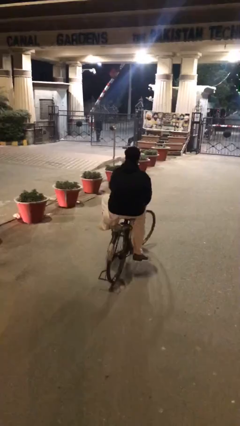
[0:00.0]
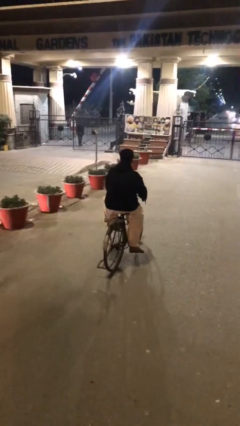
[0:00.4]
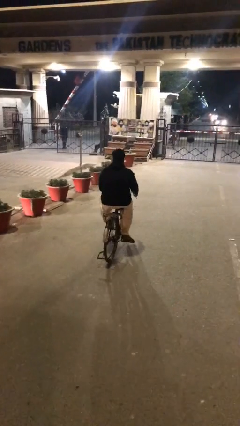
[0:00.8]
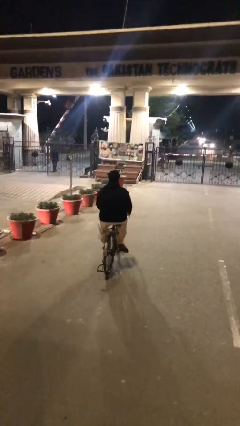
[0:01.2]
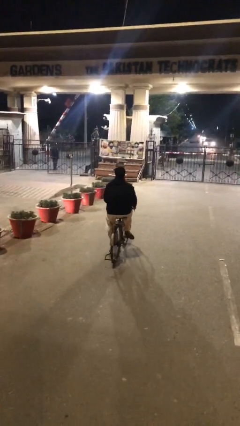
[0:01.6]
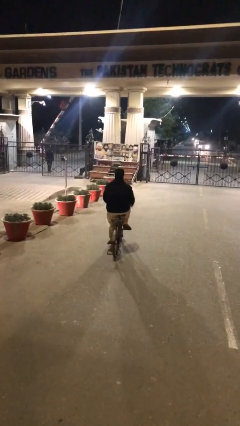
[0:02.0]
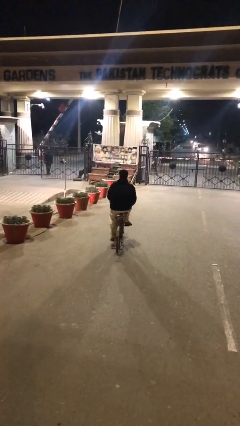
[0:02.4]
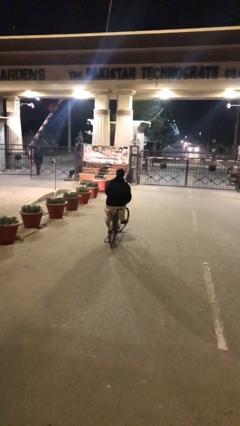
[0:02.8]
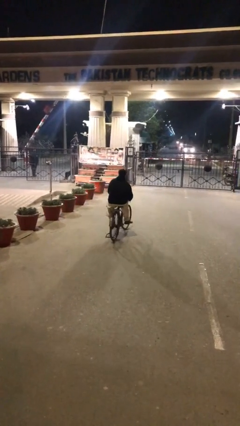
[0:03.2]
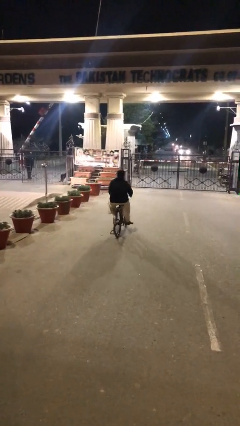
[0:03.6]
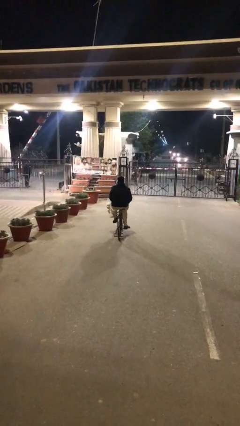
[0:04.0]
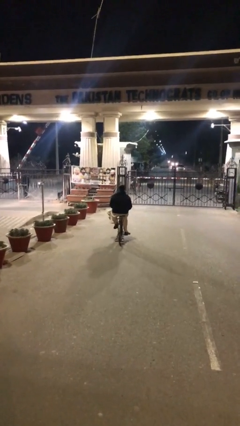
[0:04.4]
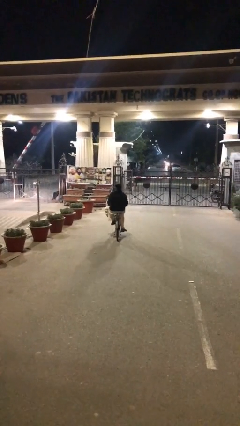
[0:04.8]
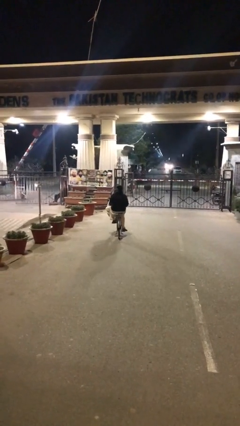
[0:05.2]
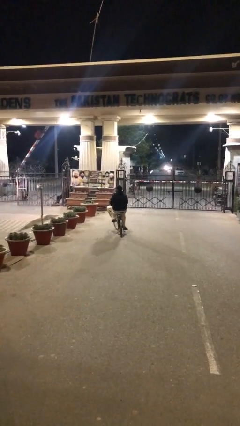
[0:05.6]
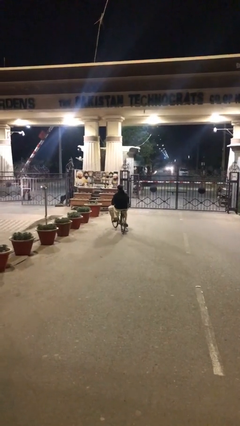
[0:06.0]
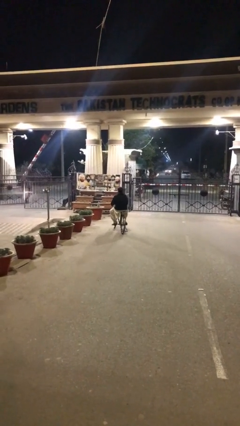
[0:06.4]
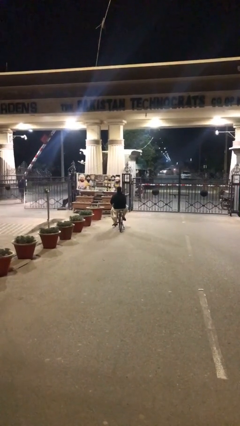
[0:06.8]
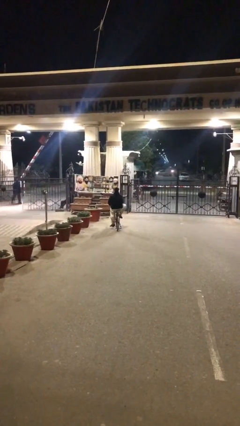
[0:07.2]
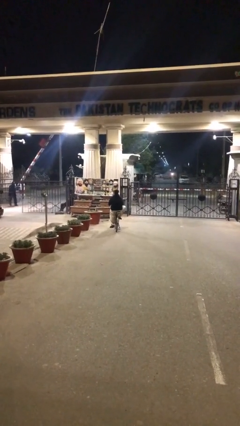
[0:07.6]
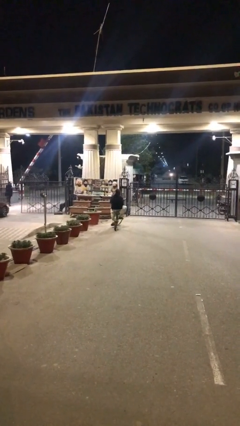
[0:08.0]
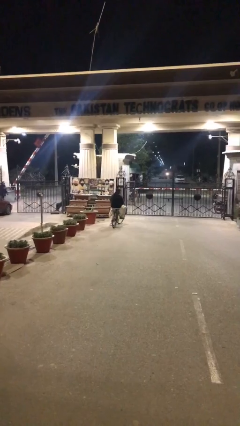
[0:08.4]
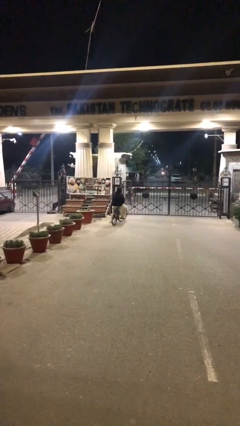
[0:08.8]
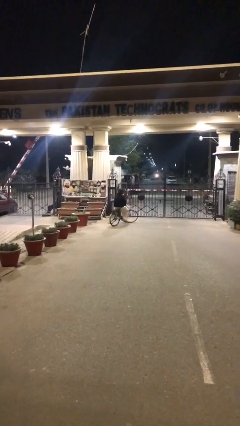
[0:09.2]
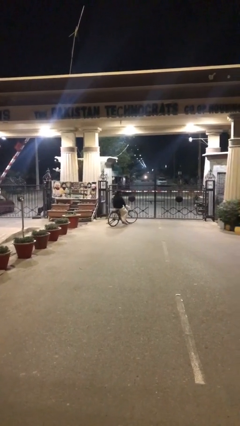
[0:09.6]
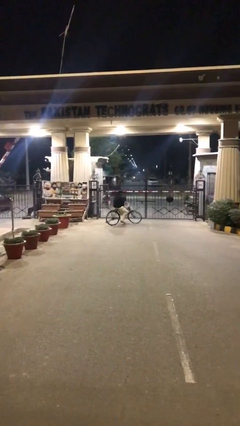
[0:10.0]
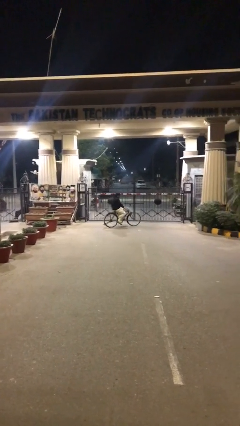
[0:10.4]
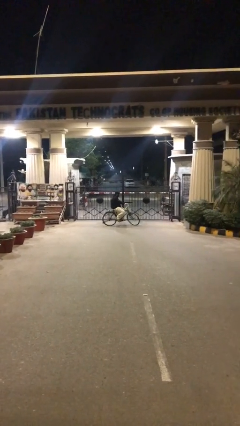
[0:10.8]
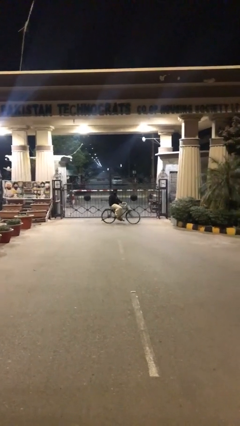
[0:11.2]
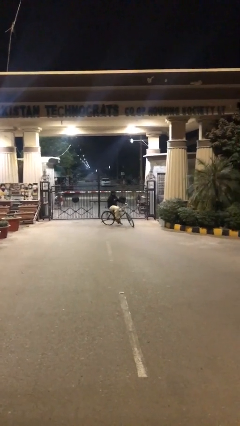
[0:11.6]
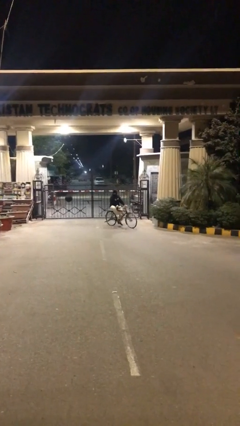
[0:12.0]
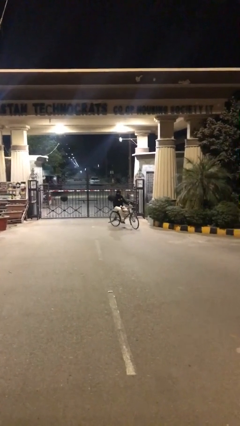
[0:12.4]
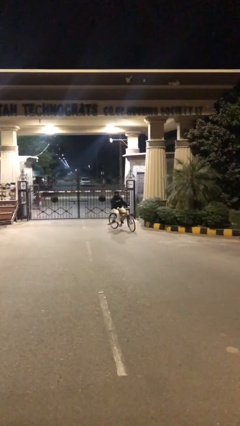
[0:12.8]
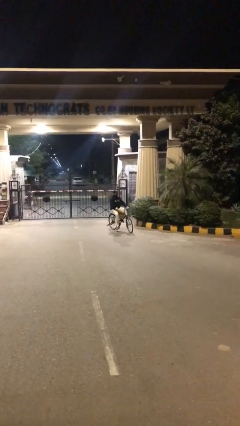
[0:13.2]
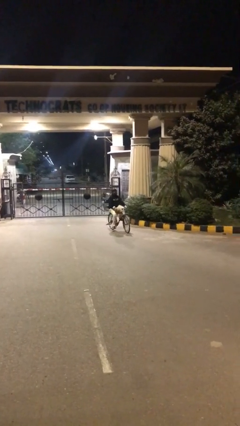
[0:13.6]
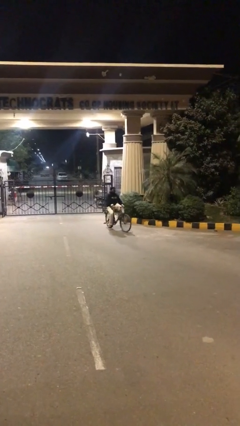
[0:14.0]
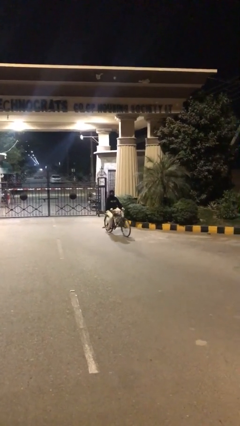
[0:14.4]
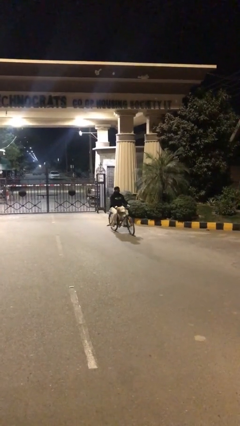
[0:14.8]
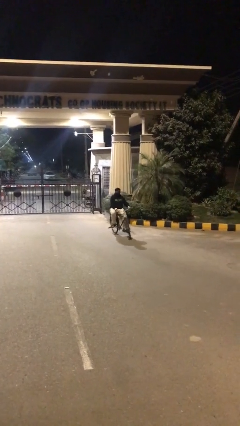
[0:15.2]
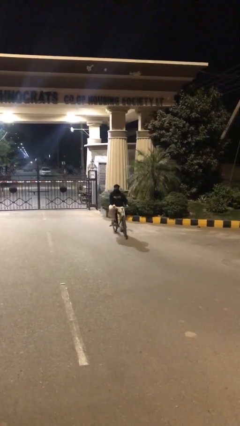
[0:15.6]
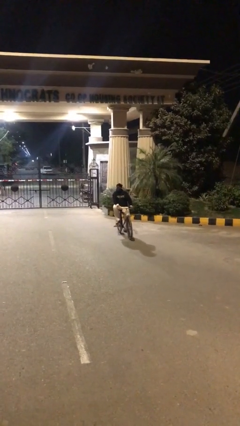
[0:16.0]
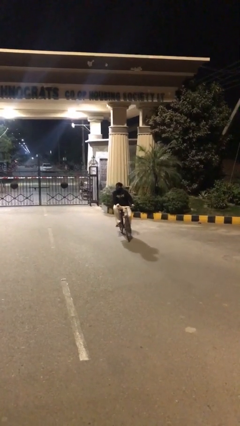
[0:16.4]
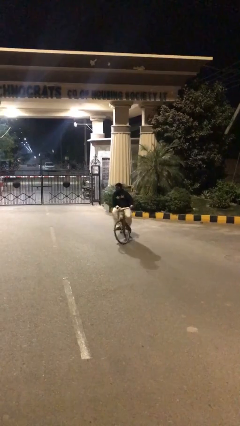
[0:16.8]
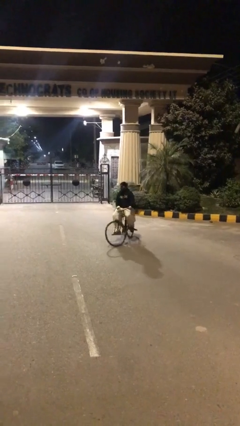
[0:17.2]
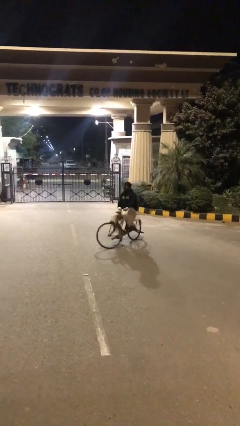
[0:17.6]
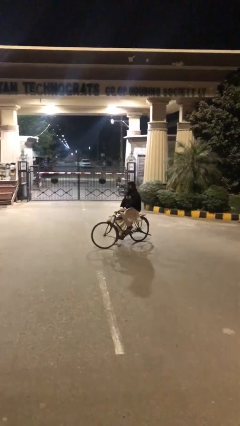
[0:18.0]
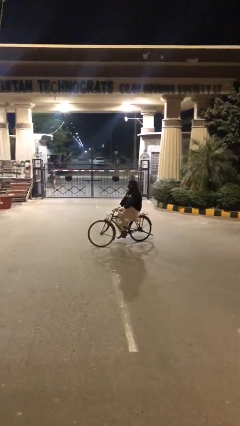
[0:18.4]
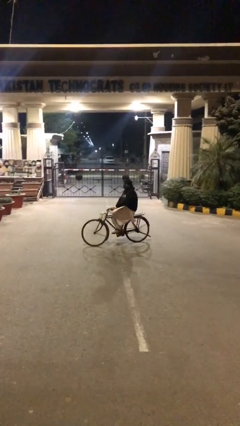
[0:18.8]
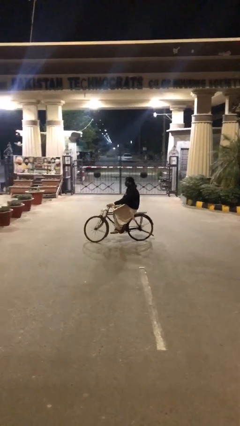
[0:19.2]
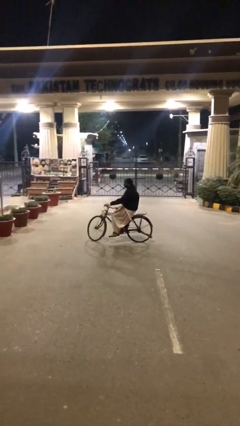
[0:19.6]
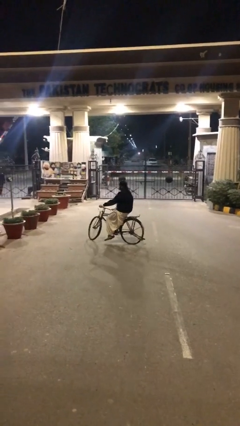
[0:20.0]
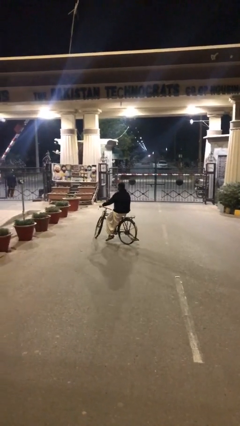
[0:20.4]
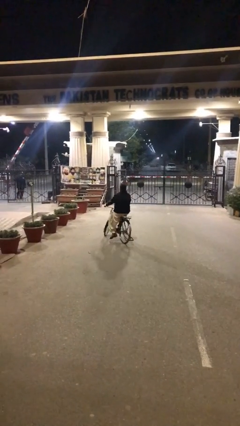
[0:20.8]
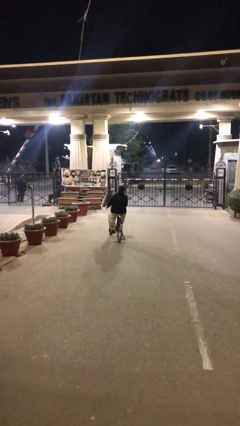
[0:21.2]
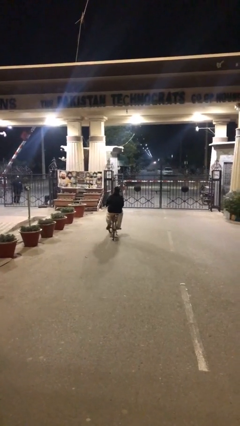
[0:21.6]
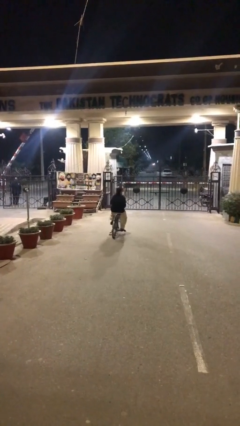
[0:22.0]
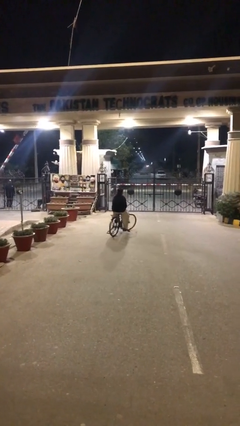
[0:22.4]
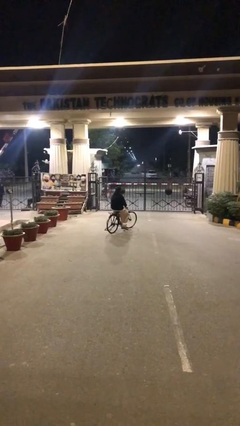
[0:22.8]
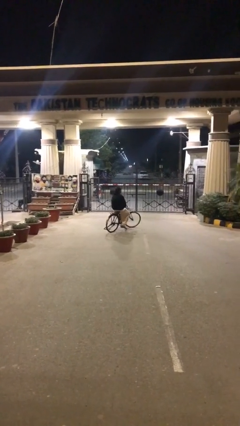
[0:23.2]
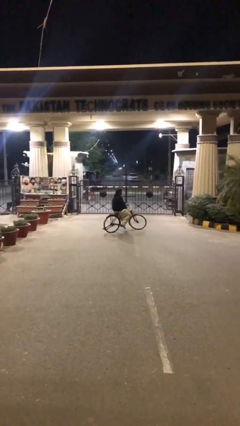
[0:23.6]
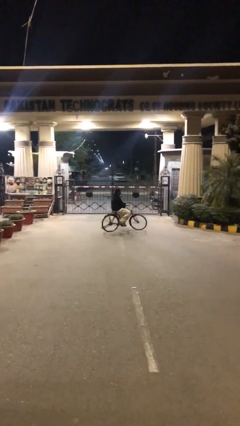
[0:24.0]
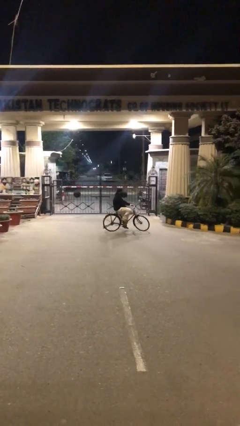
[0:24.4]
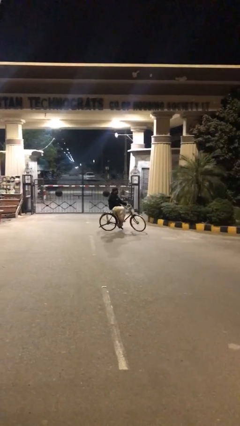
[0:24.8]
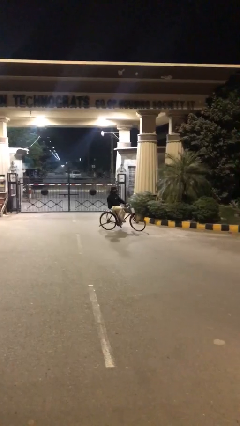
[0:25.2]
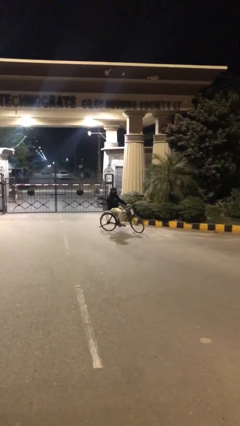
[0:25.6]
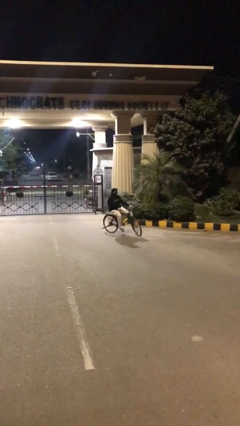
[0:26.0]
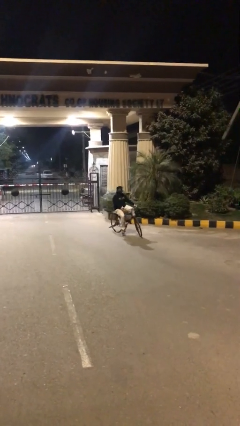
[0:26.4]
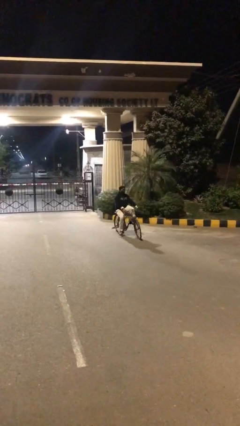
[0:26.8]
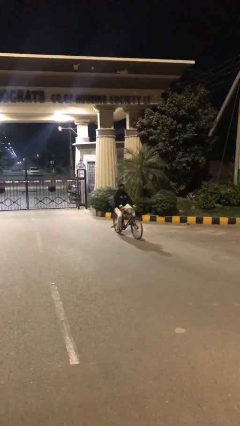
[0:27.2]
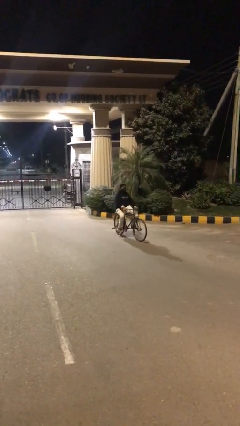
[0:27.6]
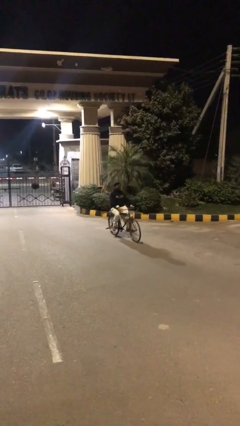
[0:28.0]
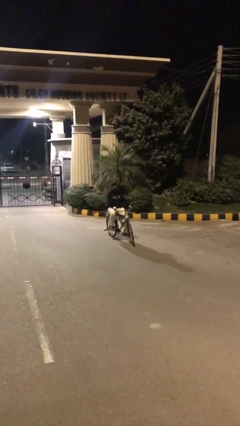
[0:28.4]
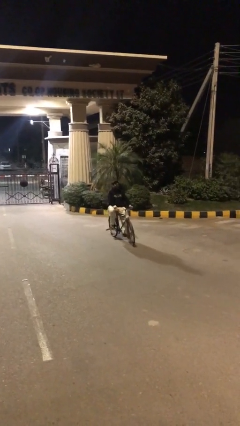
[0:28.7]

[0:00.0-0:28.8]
person rides bicycle

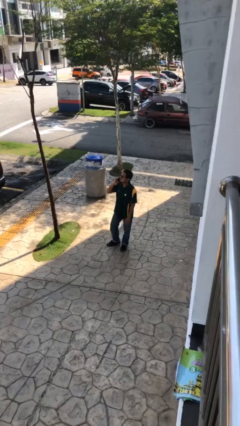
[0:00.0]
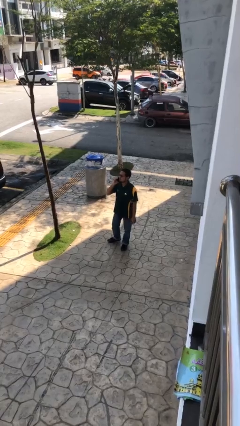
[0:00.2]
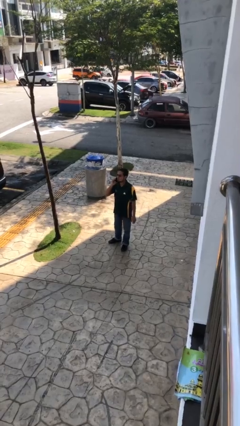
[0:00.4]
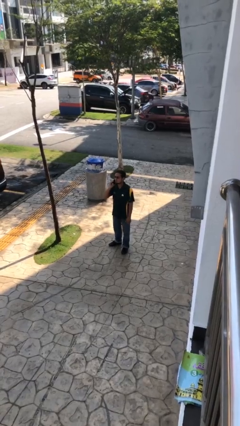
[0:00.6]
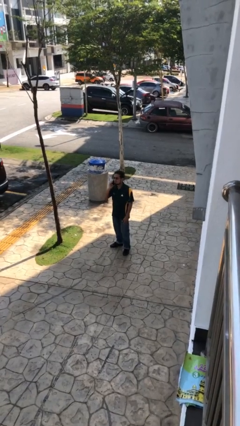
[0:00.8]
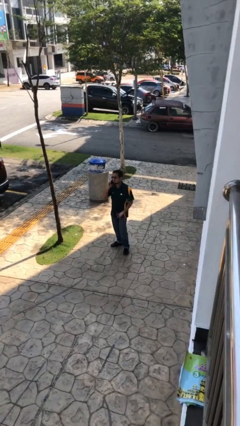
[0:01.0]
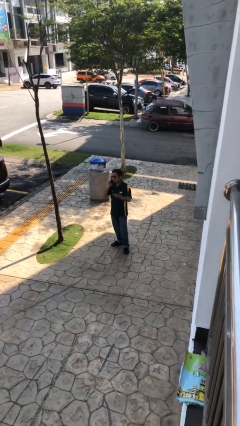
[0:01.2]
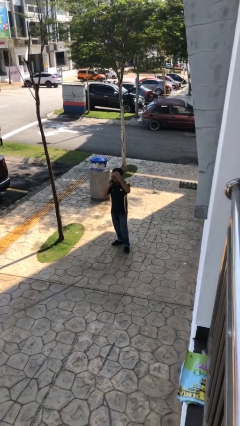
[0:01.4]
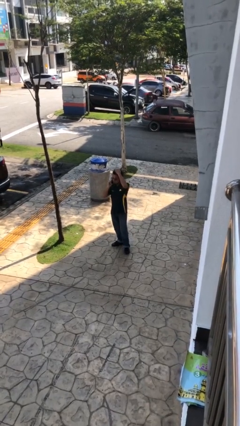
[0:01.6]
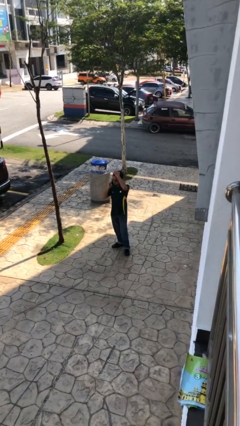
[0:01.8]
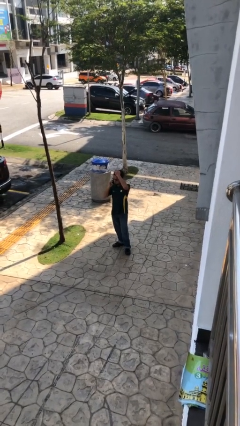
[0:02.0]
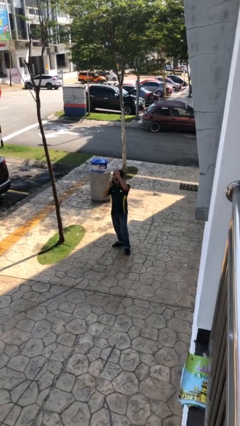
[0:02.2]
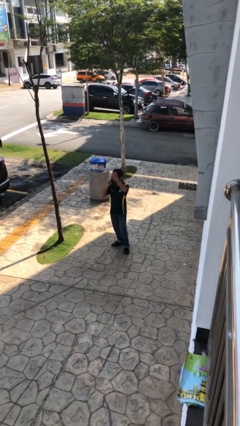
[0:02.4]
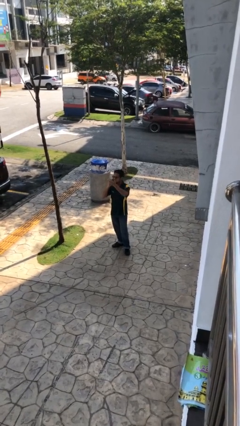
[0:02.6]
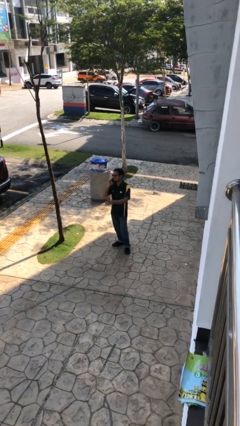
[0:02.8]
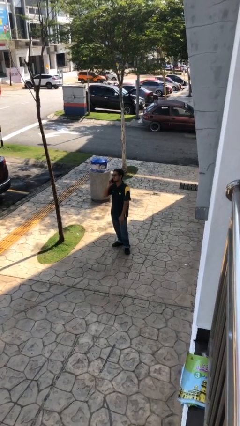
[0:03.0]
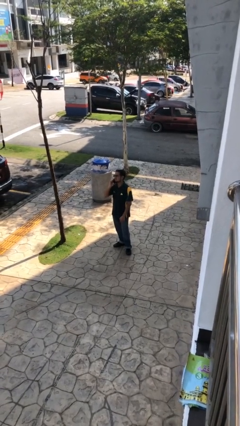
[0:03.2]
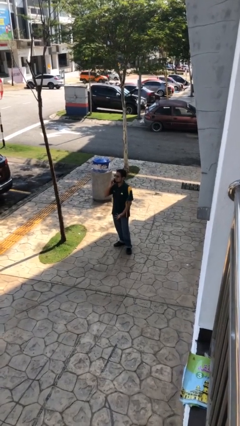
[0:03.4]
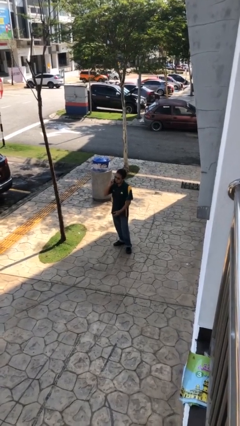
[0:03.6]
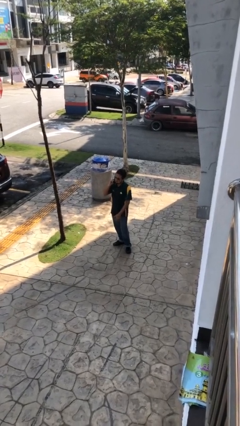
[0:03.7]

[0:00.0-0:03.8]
person talks on phone
